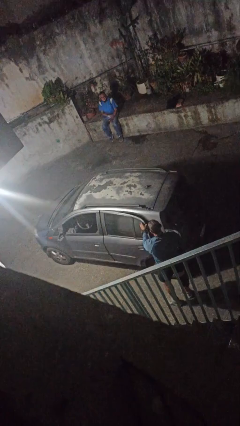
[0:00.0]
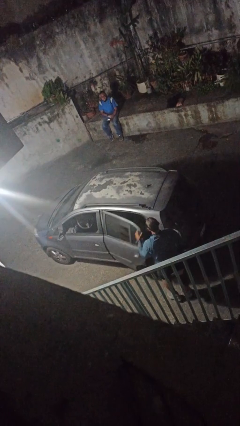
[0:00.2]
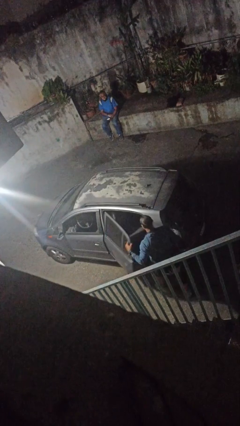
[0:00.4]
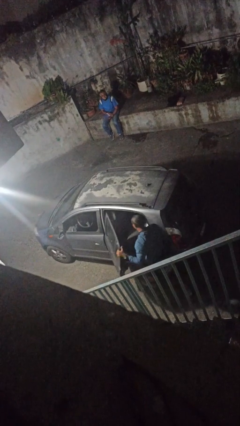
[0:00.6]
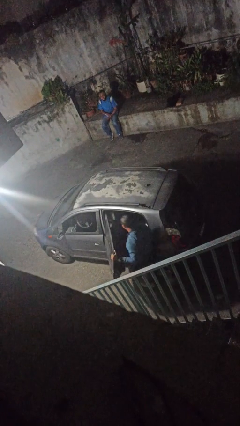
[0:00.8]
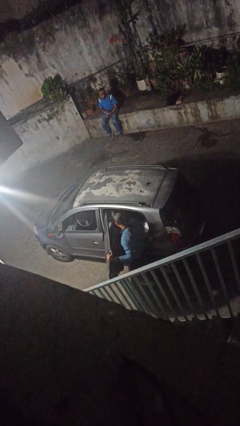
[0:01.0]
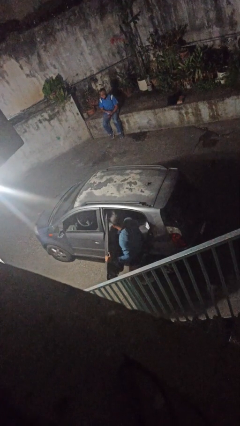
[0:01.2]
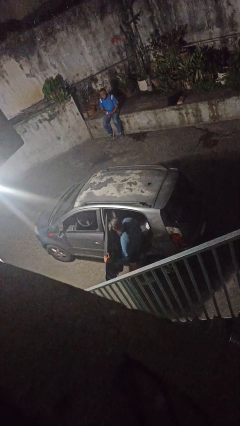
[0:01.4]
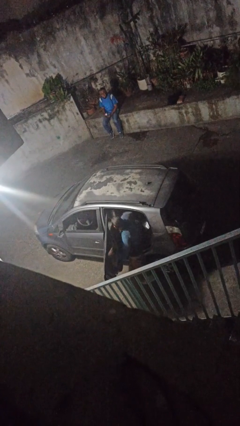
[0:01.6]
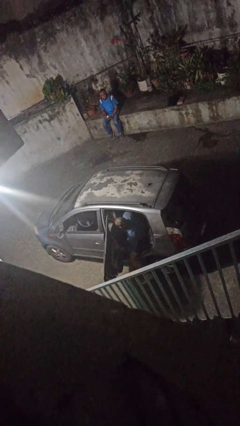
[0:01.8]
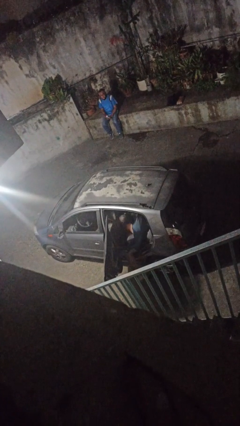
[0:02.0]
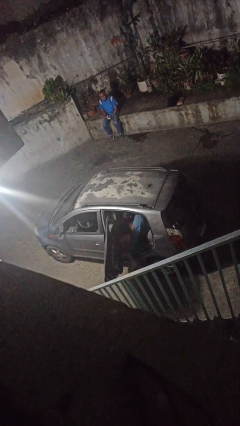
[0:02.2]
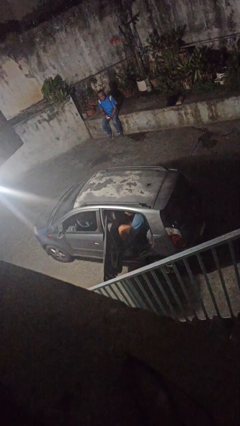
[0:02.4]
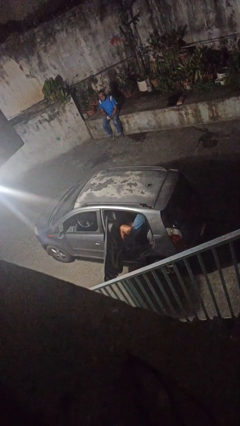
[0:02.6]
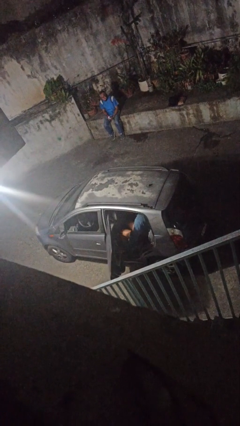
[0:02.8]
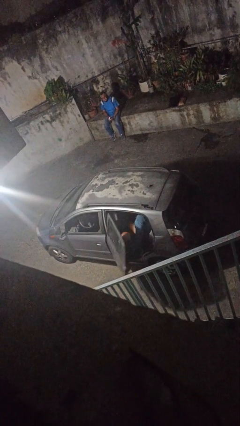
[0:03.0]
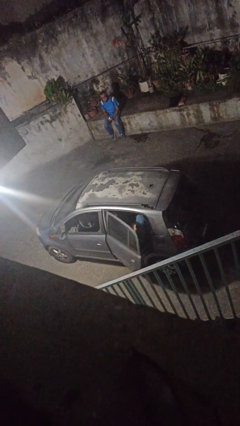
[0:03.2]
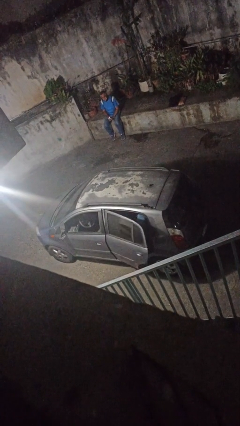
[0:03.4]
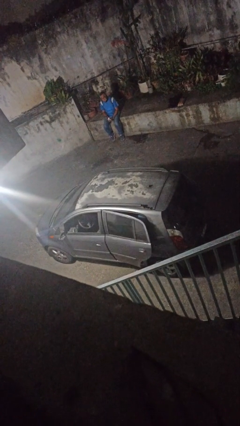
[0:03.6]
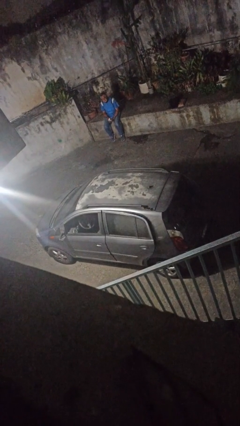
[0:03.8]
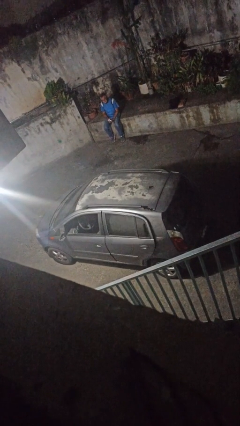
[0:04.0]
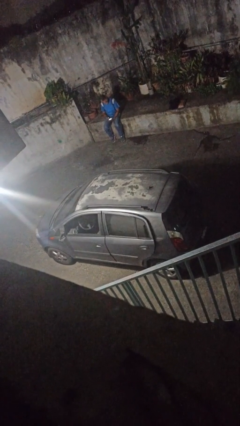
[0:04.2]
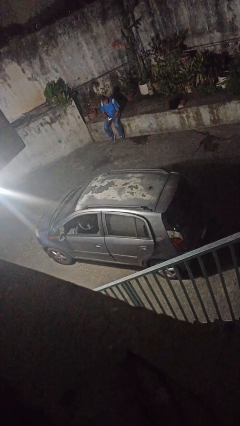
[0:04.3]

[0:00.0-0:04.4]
car picks up person

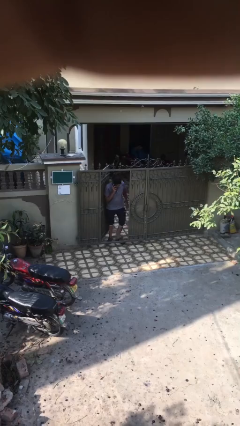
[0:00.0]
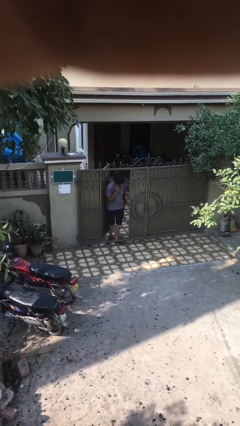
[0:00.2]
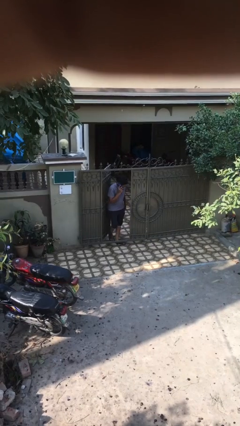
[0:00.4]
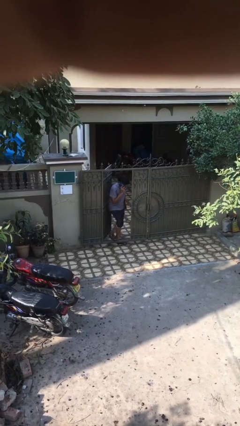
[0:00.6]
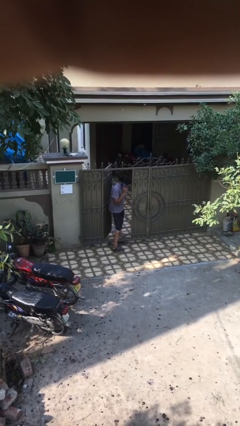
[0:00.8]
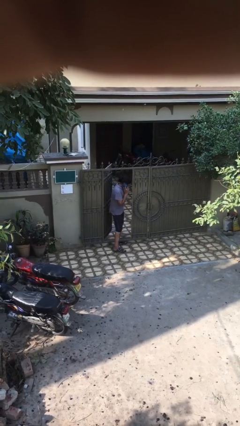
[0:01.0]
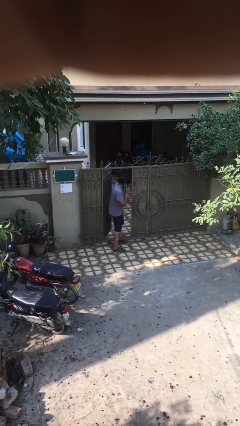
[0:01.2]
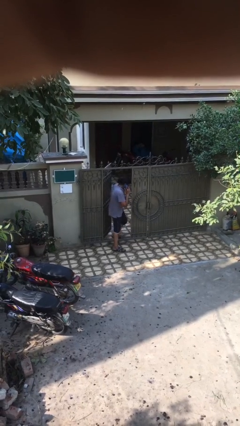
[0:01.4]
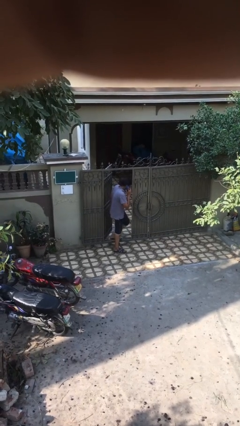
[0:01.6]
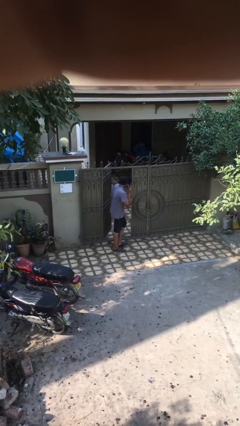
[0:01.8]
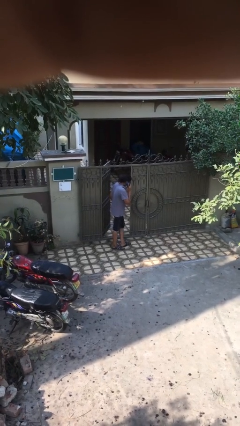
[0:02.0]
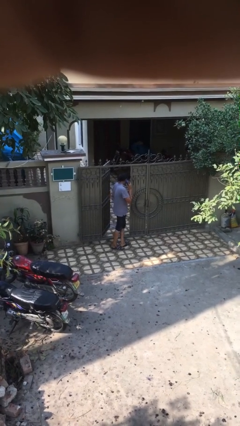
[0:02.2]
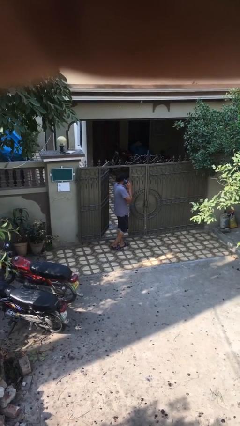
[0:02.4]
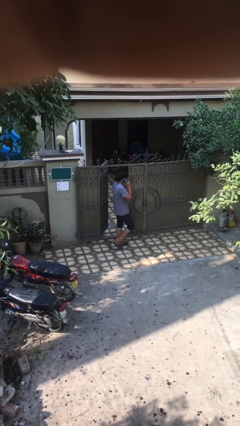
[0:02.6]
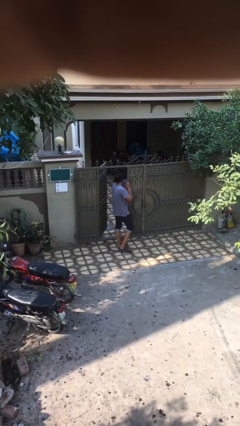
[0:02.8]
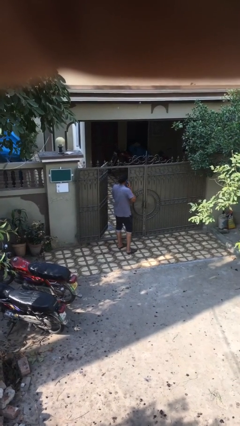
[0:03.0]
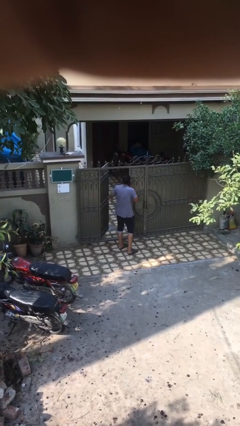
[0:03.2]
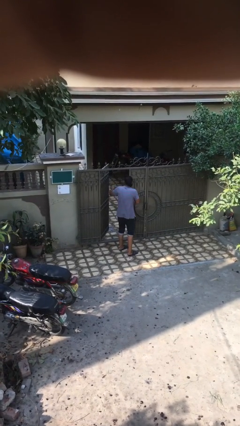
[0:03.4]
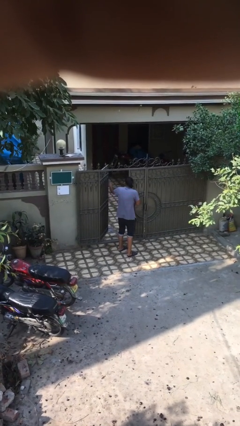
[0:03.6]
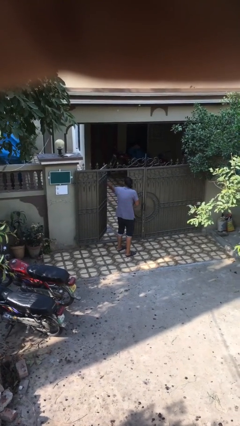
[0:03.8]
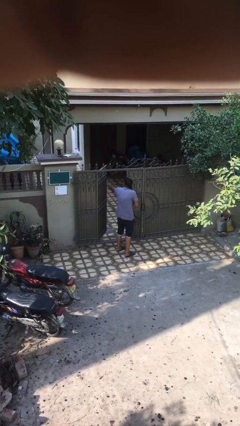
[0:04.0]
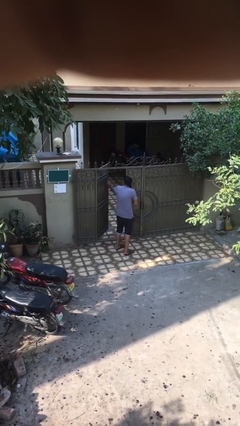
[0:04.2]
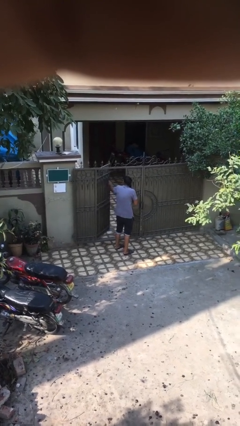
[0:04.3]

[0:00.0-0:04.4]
person enters scene through structure

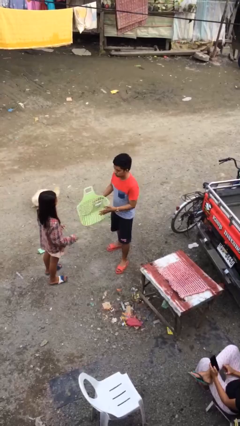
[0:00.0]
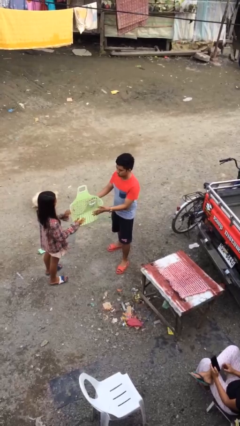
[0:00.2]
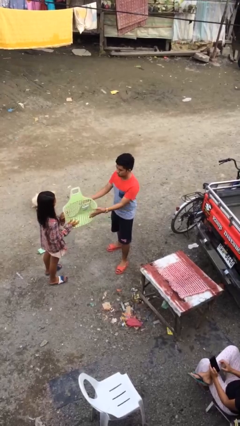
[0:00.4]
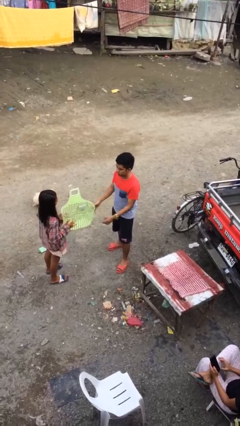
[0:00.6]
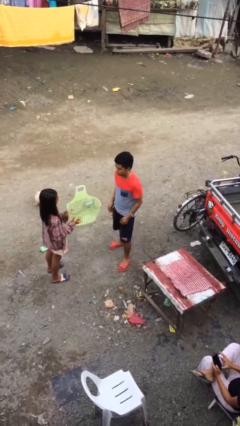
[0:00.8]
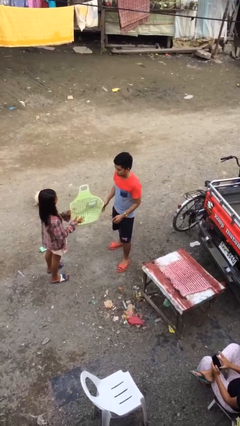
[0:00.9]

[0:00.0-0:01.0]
person transfers object to person

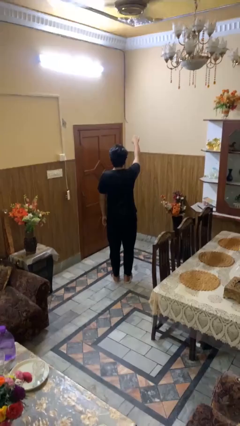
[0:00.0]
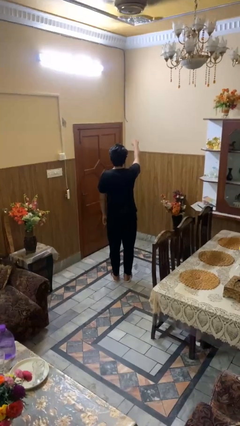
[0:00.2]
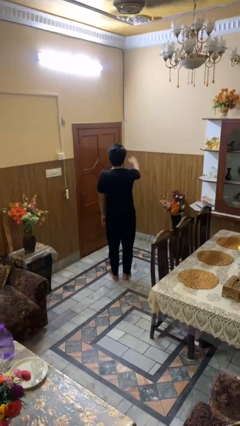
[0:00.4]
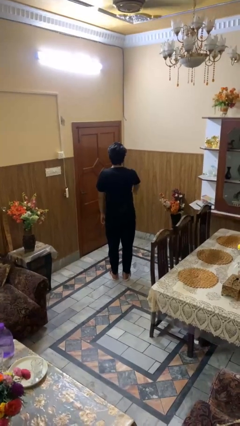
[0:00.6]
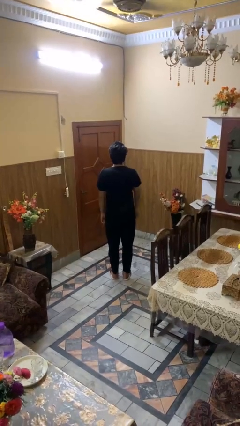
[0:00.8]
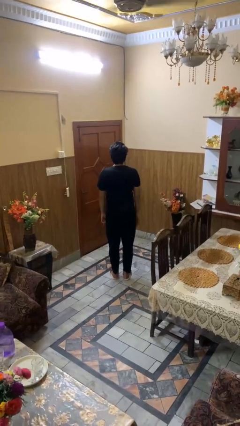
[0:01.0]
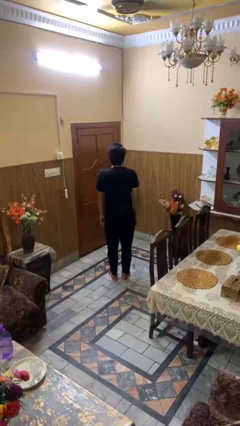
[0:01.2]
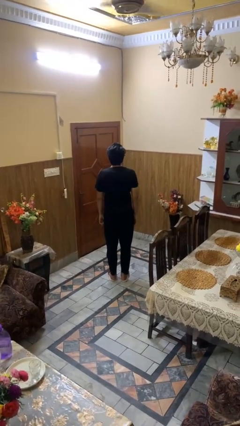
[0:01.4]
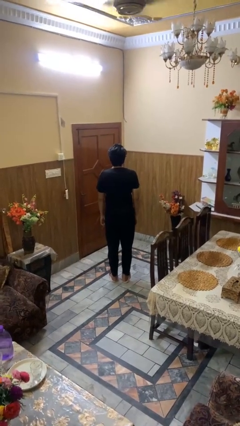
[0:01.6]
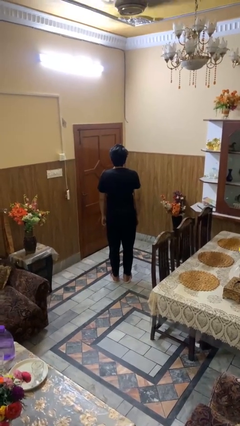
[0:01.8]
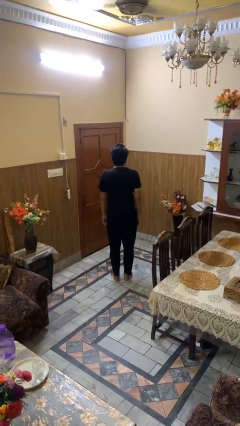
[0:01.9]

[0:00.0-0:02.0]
person gestures swipe down

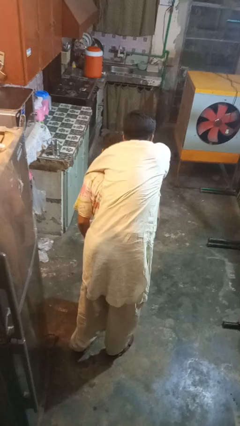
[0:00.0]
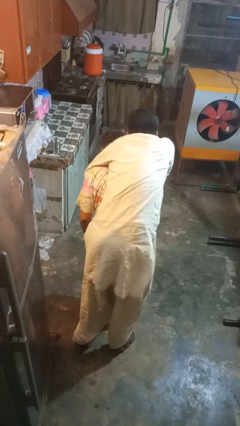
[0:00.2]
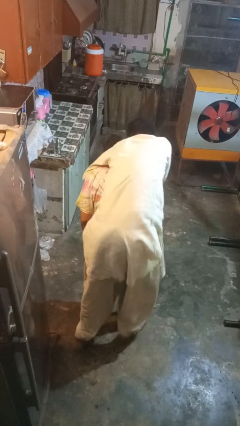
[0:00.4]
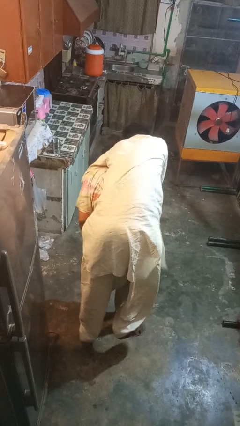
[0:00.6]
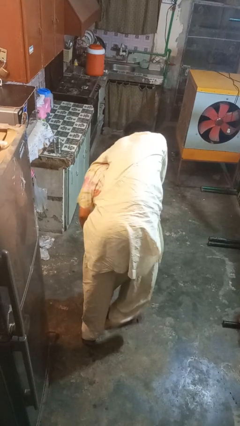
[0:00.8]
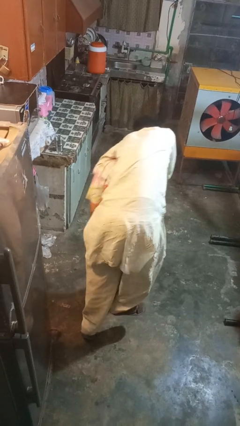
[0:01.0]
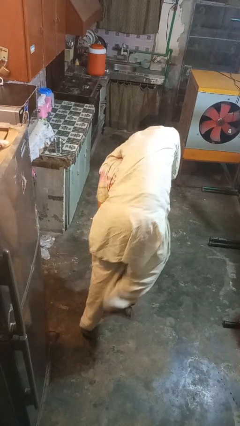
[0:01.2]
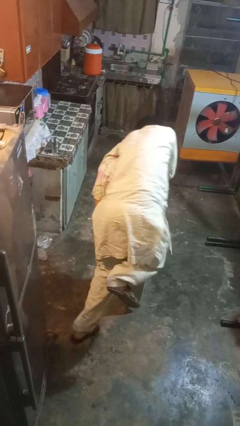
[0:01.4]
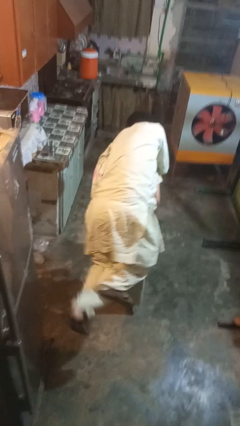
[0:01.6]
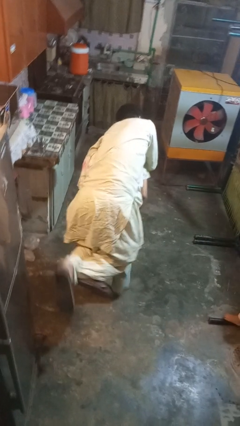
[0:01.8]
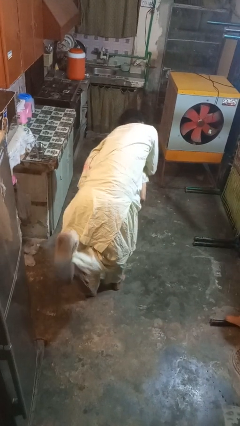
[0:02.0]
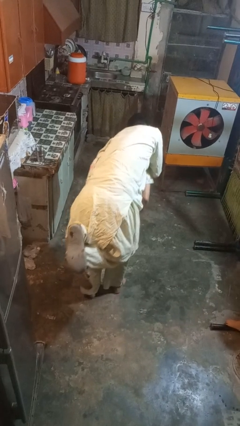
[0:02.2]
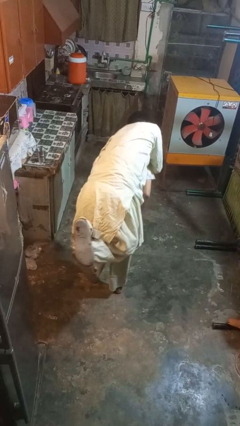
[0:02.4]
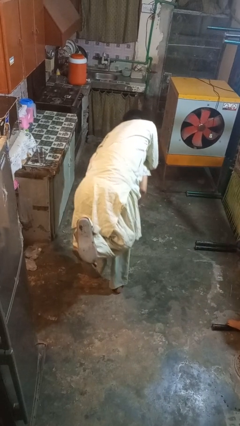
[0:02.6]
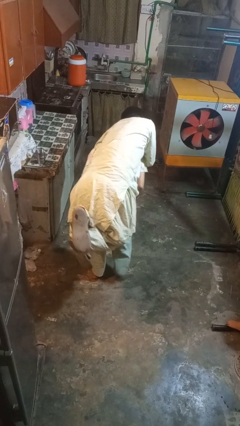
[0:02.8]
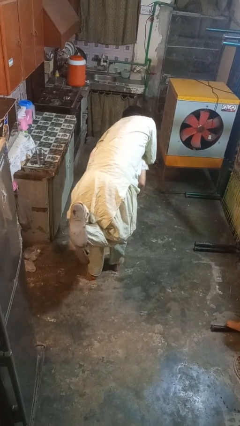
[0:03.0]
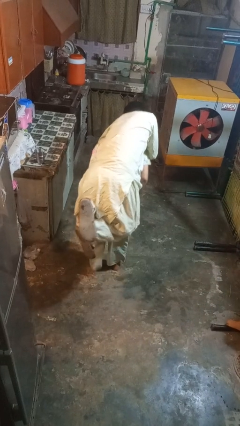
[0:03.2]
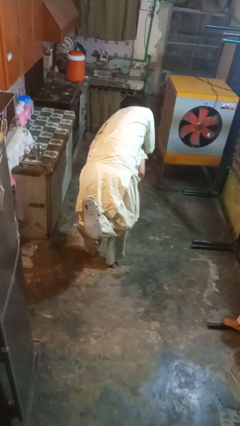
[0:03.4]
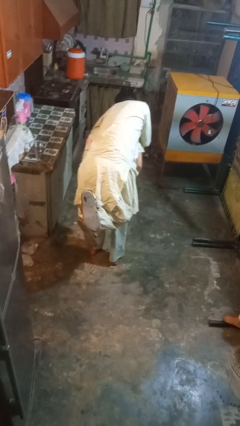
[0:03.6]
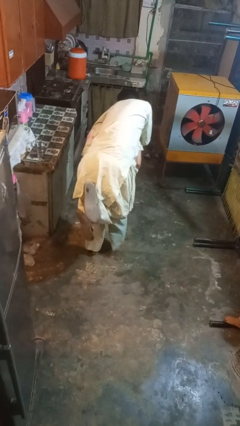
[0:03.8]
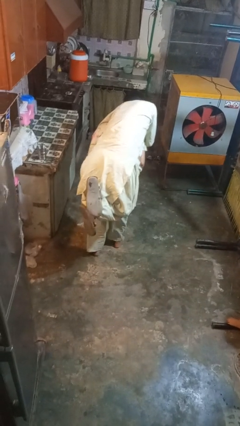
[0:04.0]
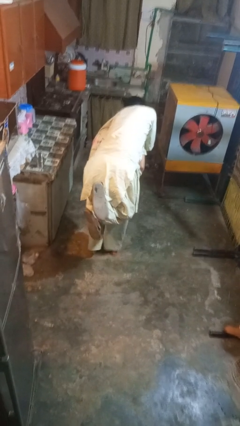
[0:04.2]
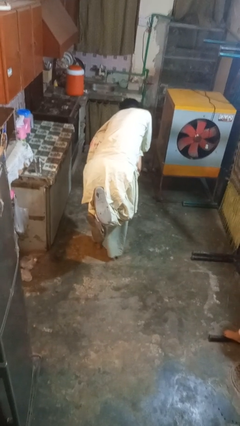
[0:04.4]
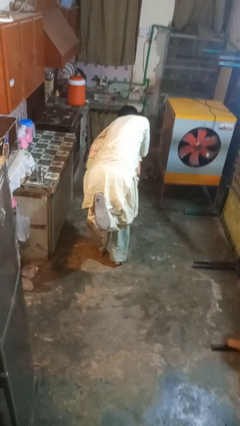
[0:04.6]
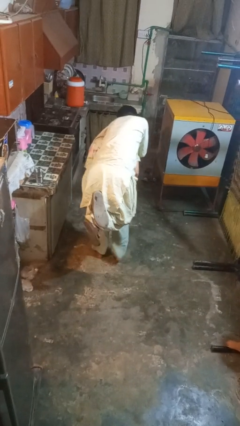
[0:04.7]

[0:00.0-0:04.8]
person carries person on back

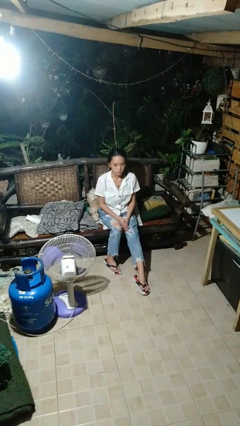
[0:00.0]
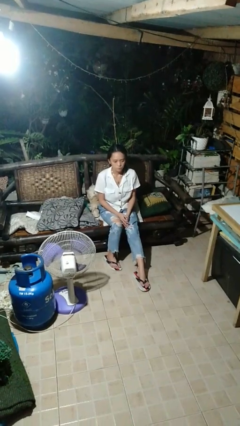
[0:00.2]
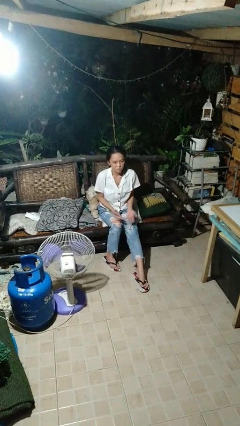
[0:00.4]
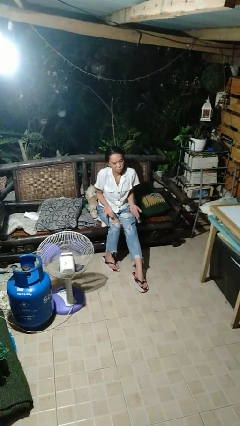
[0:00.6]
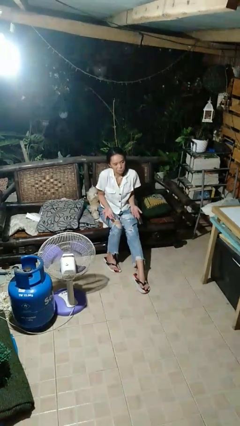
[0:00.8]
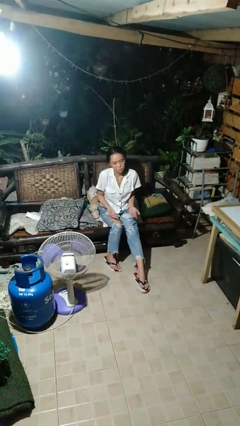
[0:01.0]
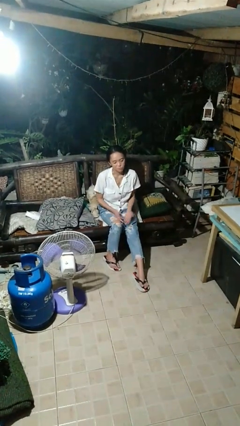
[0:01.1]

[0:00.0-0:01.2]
person shrugs
